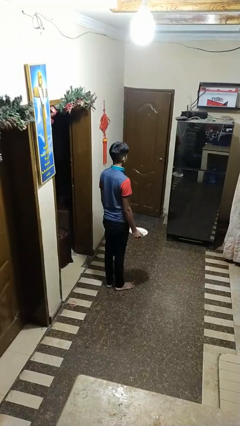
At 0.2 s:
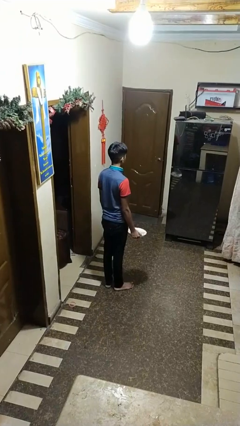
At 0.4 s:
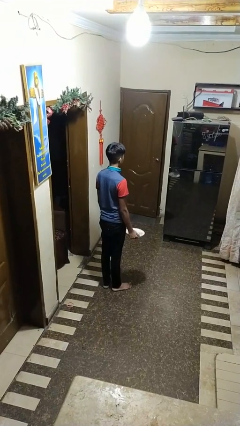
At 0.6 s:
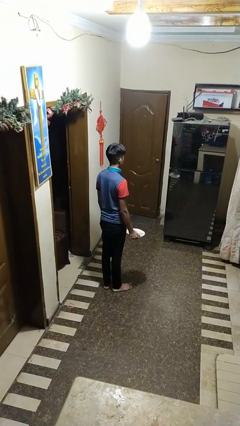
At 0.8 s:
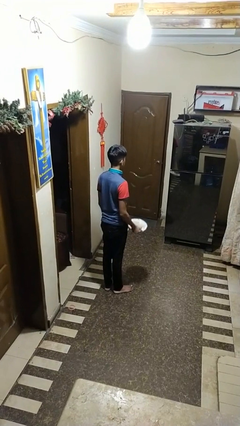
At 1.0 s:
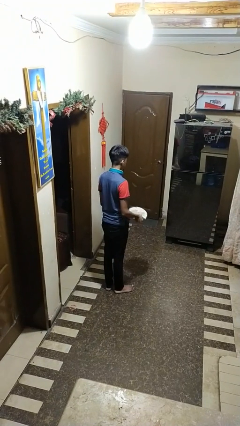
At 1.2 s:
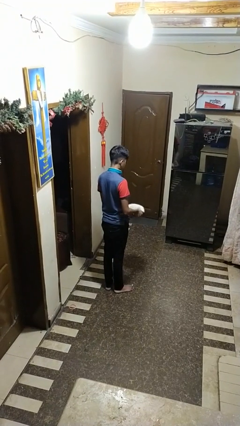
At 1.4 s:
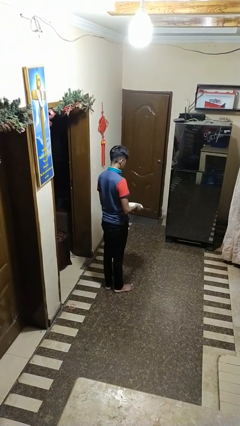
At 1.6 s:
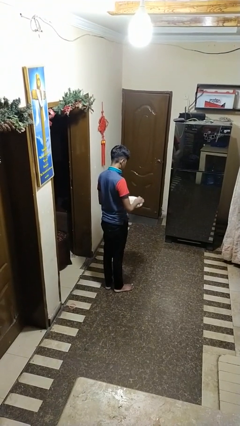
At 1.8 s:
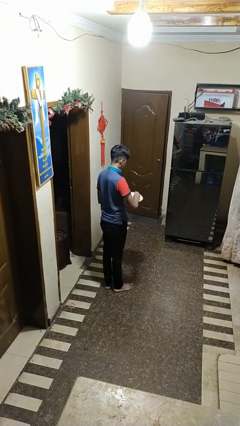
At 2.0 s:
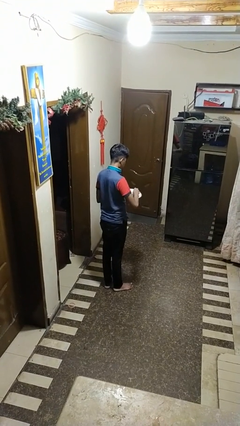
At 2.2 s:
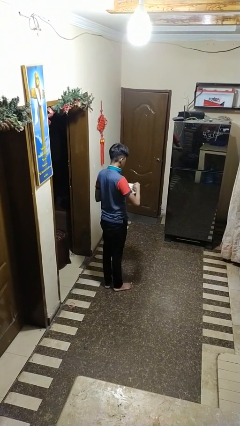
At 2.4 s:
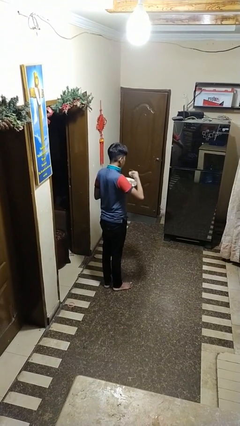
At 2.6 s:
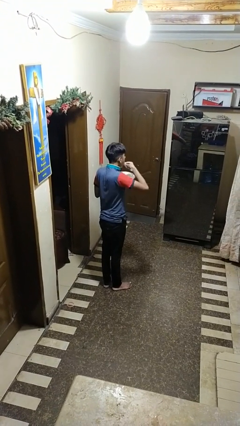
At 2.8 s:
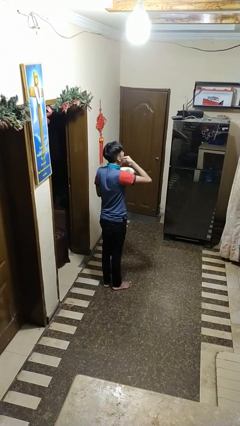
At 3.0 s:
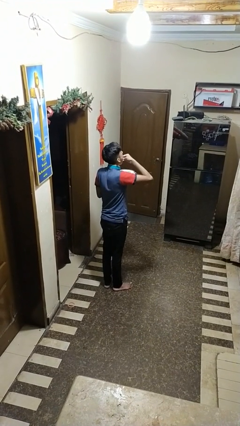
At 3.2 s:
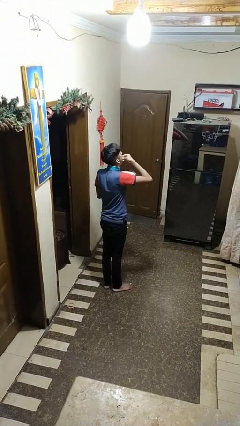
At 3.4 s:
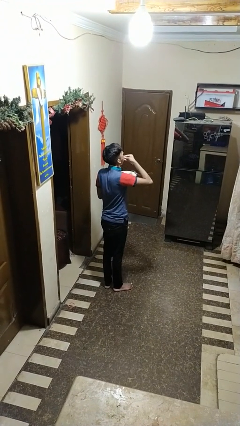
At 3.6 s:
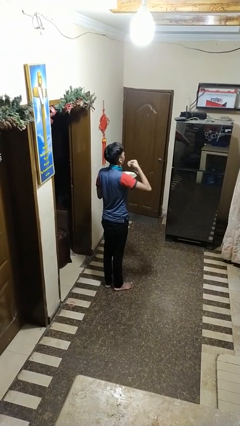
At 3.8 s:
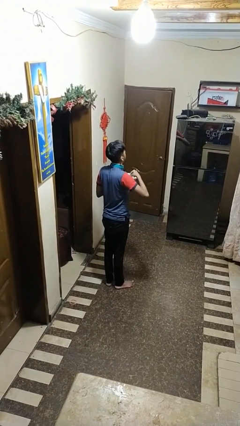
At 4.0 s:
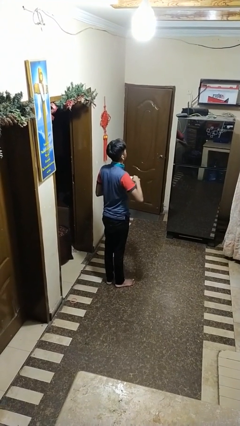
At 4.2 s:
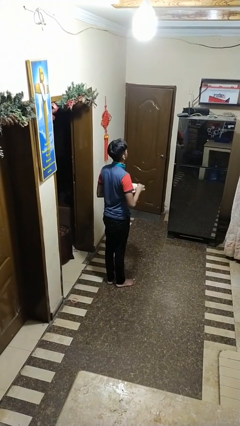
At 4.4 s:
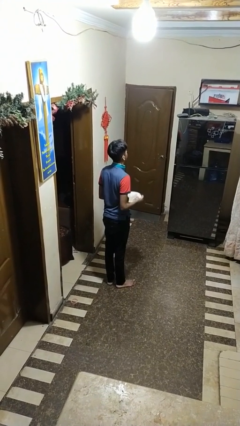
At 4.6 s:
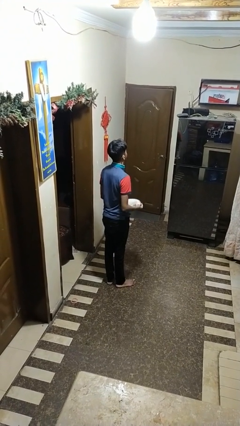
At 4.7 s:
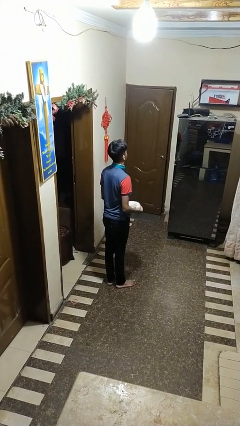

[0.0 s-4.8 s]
person eats with hands

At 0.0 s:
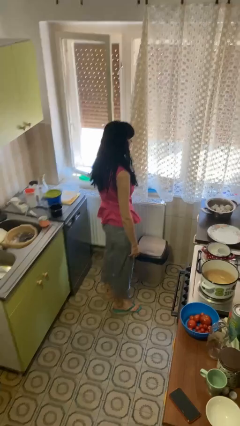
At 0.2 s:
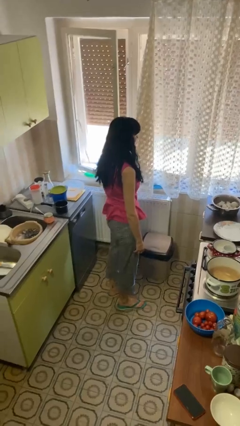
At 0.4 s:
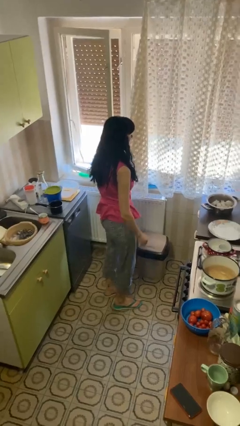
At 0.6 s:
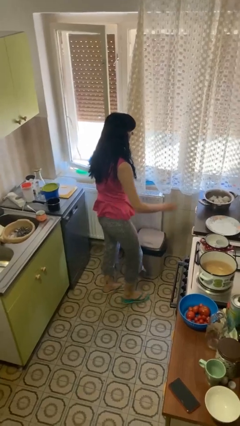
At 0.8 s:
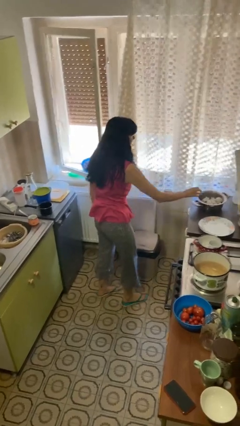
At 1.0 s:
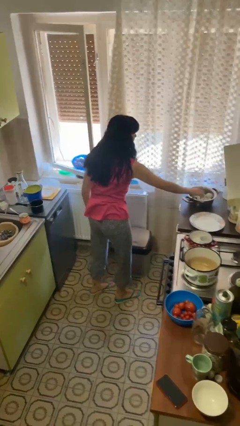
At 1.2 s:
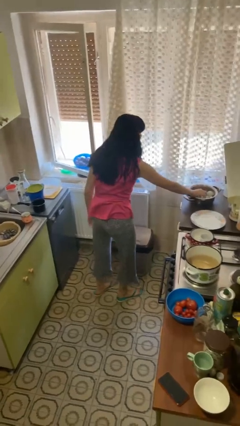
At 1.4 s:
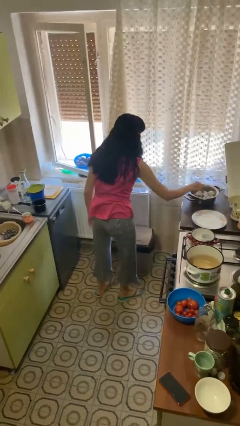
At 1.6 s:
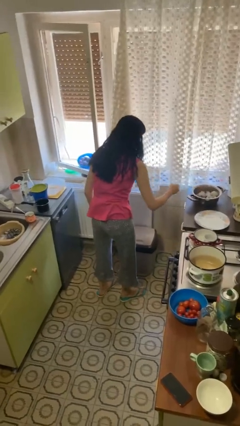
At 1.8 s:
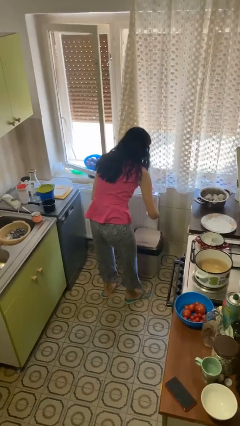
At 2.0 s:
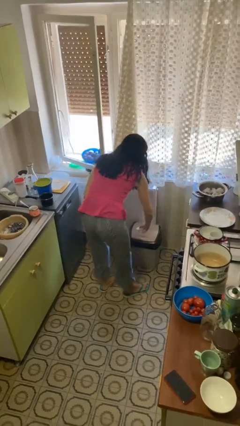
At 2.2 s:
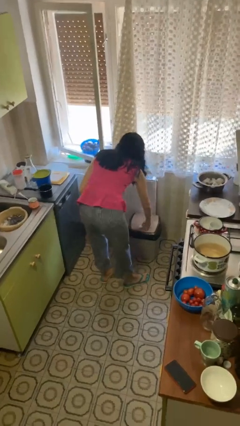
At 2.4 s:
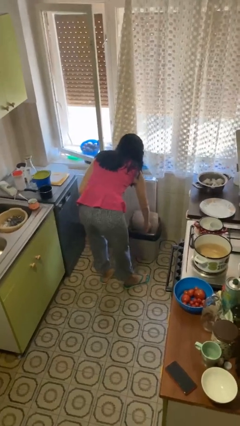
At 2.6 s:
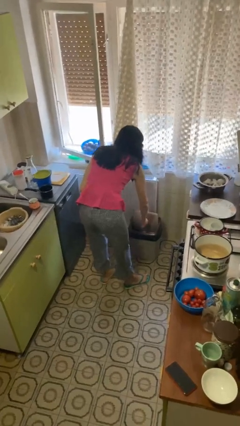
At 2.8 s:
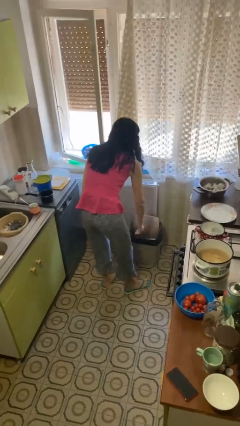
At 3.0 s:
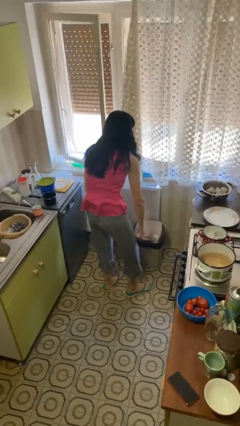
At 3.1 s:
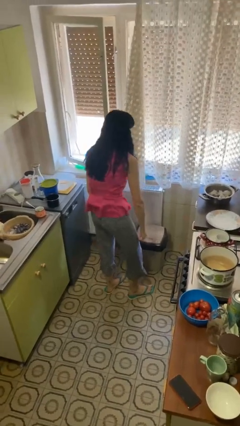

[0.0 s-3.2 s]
person discards trash

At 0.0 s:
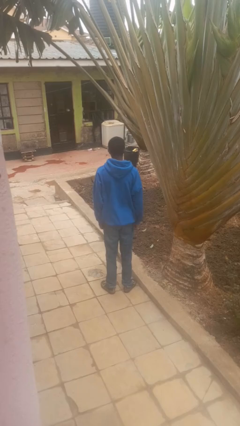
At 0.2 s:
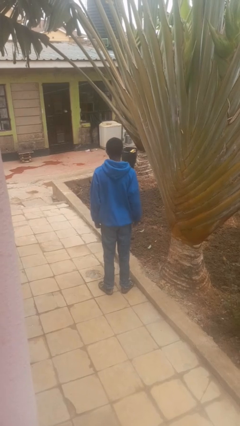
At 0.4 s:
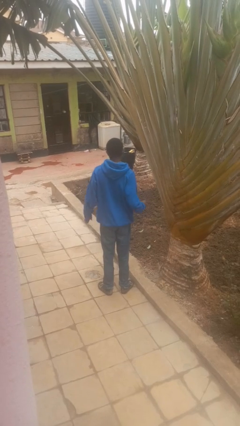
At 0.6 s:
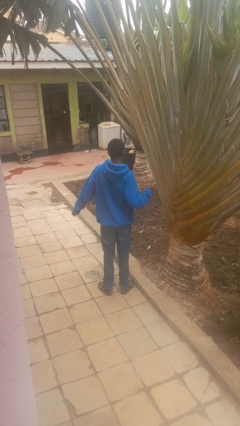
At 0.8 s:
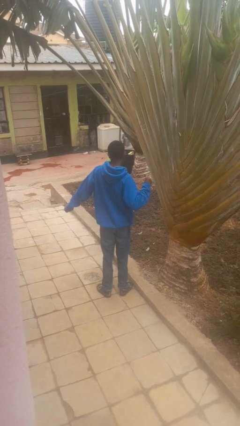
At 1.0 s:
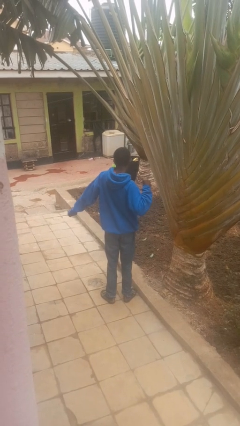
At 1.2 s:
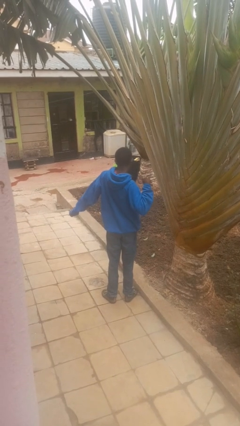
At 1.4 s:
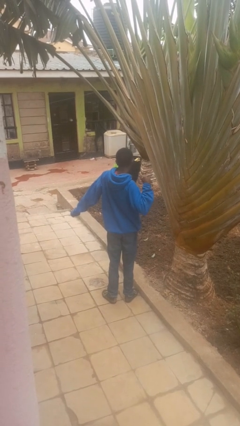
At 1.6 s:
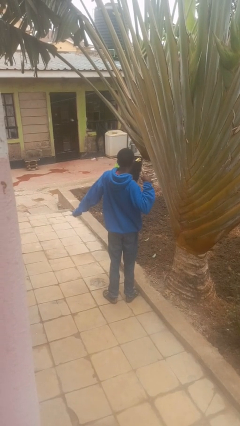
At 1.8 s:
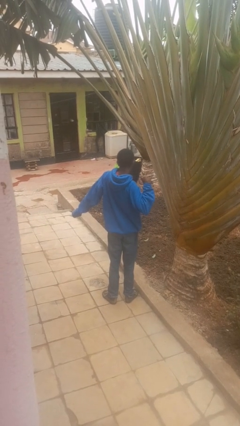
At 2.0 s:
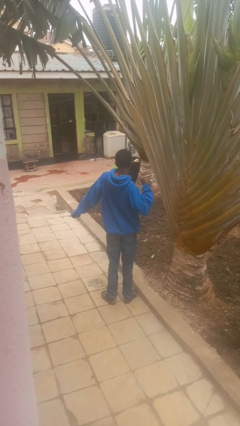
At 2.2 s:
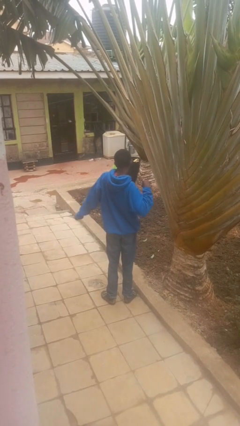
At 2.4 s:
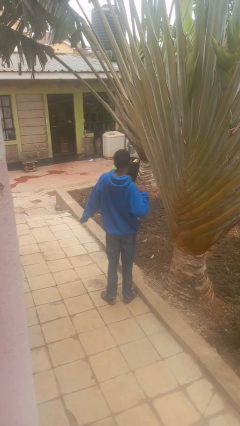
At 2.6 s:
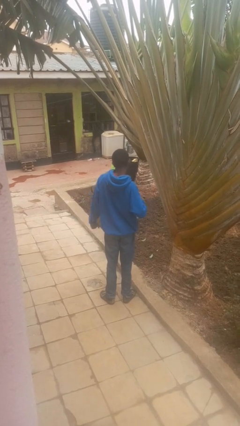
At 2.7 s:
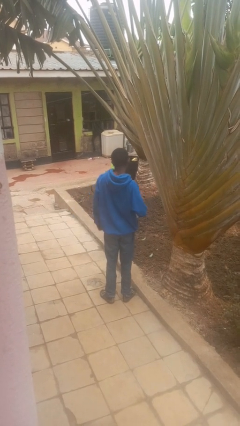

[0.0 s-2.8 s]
person stretches arms to side

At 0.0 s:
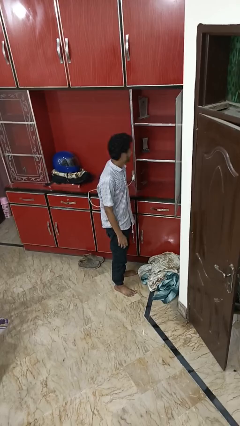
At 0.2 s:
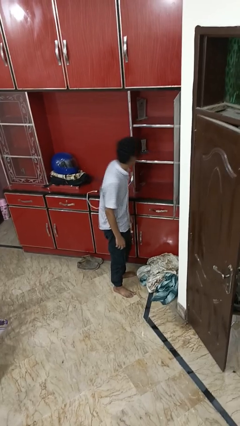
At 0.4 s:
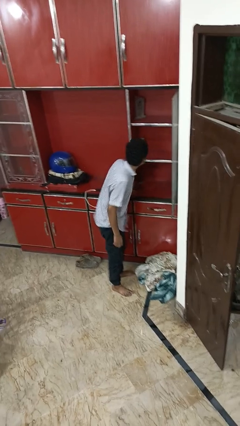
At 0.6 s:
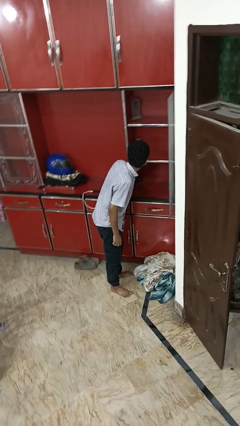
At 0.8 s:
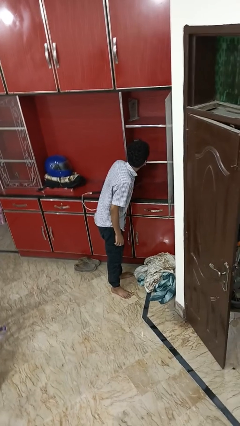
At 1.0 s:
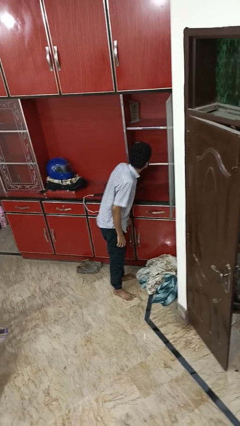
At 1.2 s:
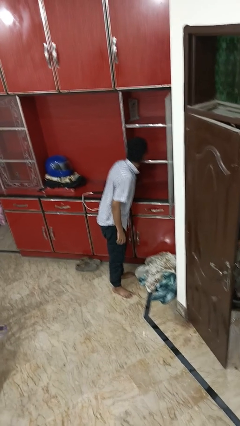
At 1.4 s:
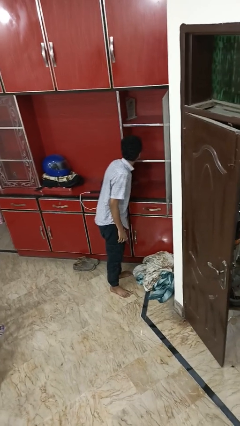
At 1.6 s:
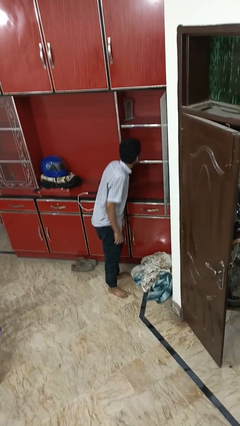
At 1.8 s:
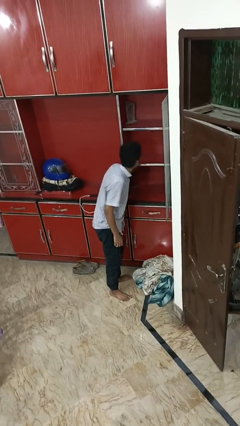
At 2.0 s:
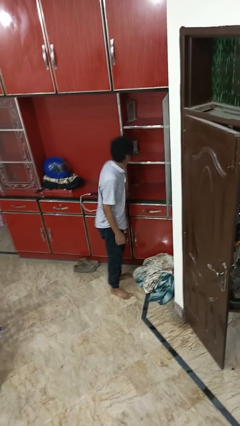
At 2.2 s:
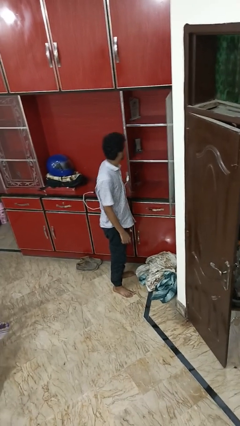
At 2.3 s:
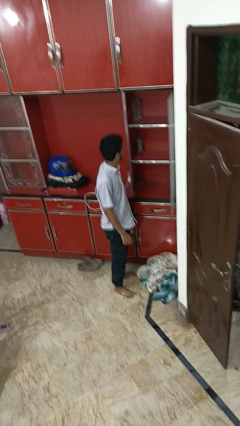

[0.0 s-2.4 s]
person searches in cabinet

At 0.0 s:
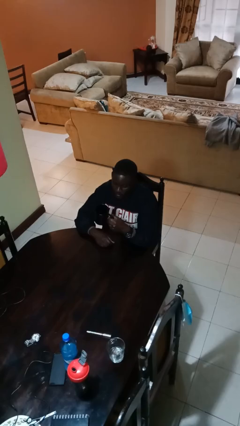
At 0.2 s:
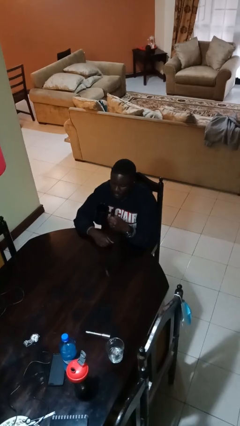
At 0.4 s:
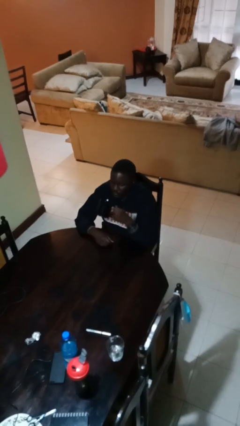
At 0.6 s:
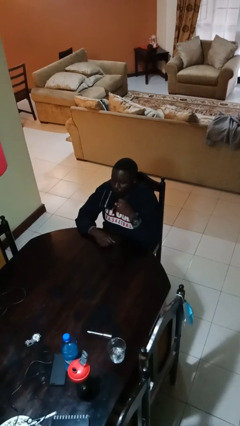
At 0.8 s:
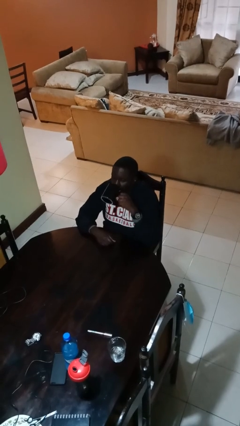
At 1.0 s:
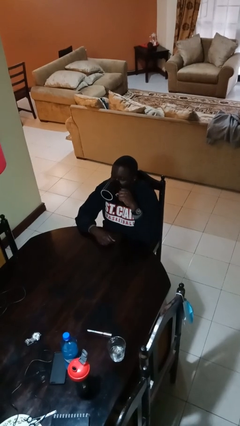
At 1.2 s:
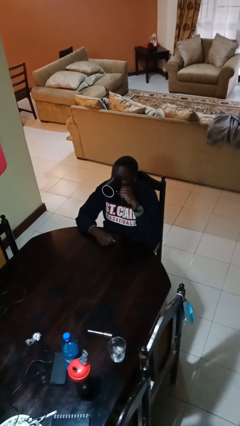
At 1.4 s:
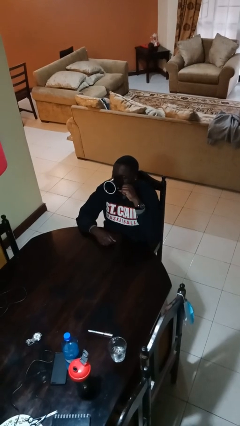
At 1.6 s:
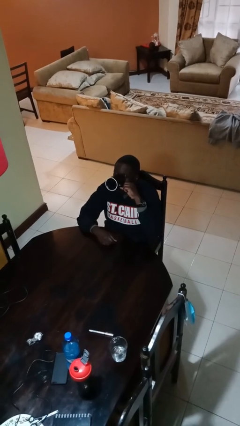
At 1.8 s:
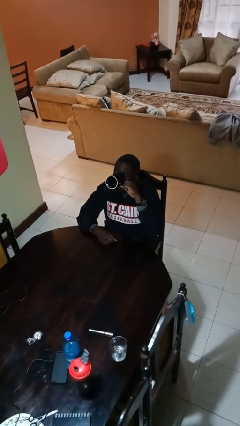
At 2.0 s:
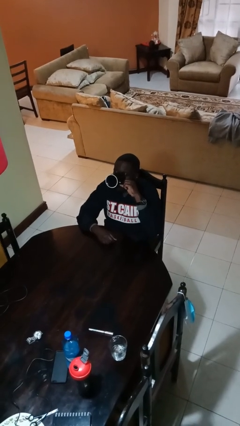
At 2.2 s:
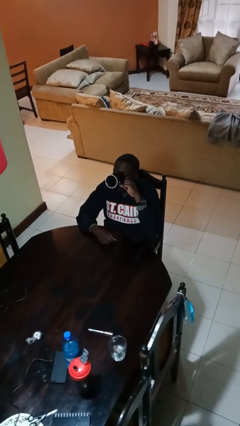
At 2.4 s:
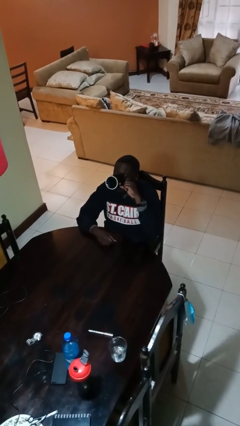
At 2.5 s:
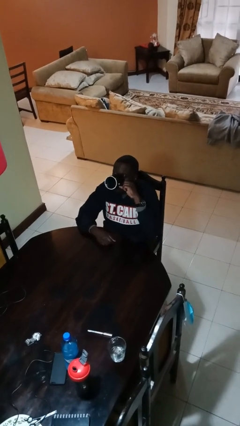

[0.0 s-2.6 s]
person drinks from mug

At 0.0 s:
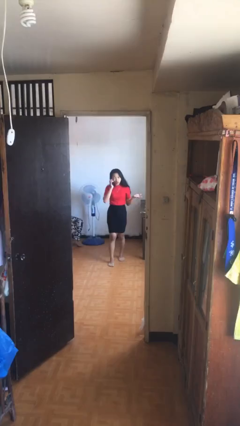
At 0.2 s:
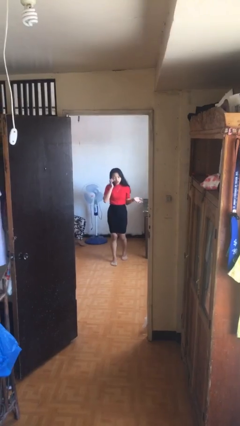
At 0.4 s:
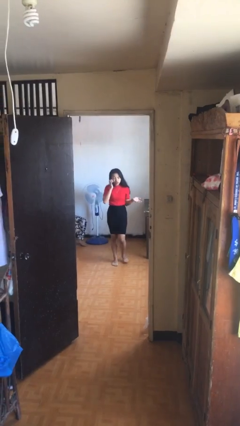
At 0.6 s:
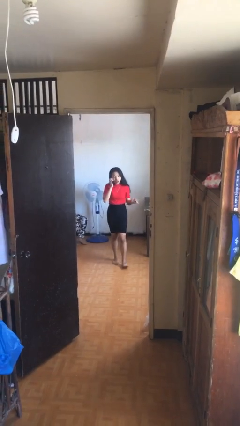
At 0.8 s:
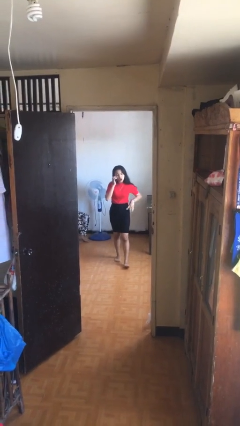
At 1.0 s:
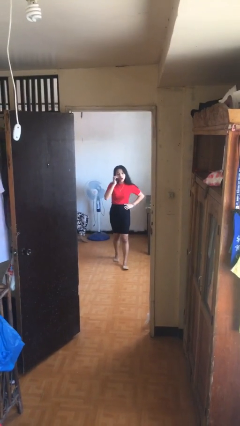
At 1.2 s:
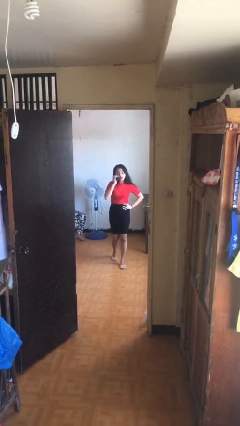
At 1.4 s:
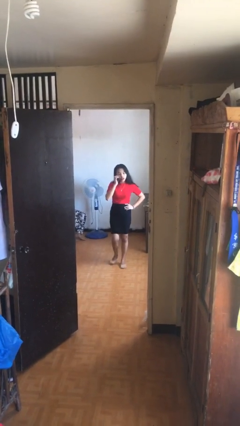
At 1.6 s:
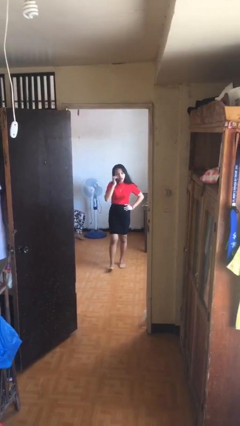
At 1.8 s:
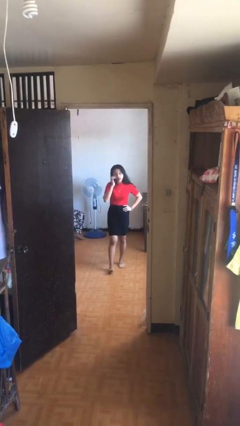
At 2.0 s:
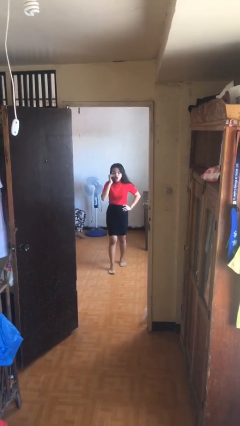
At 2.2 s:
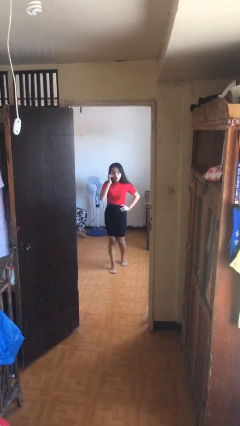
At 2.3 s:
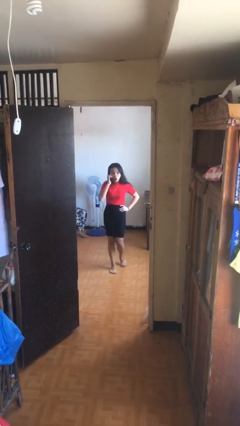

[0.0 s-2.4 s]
person talks on phone
